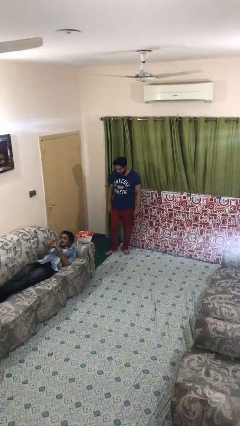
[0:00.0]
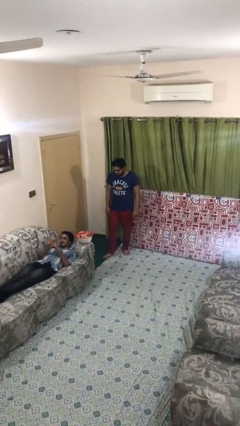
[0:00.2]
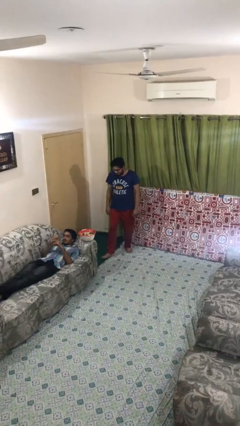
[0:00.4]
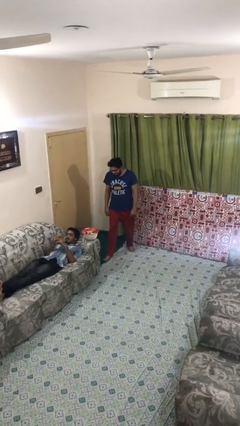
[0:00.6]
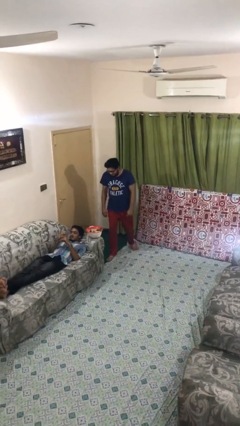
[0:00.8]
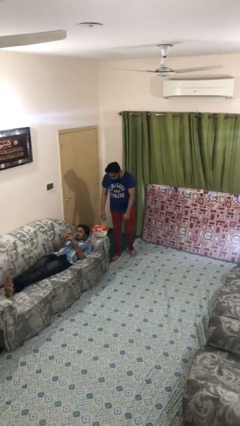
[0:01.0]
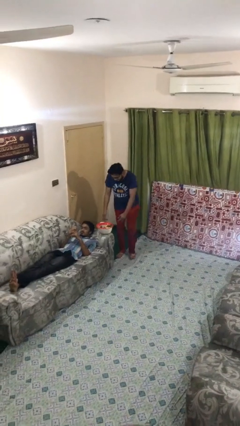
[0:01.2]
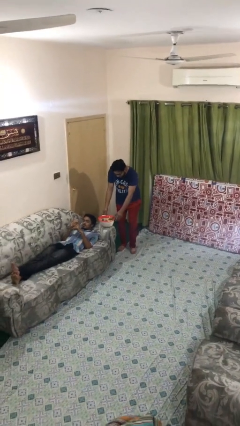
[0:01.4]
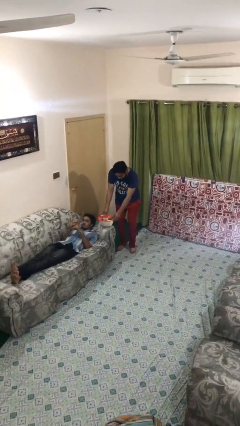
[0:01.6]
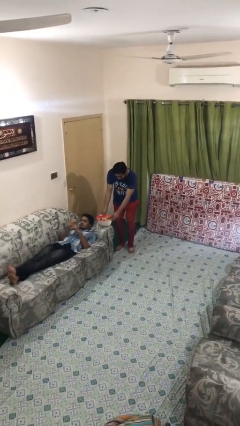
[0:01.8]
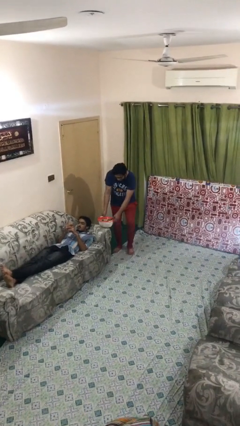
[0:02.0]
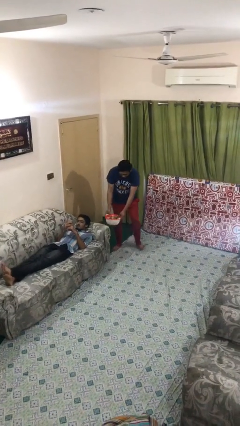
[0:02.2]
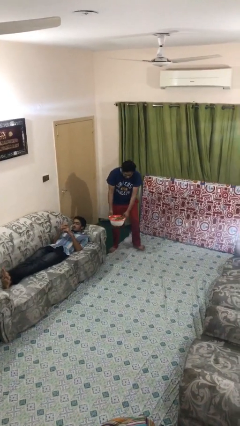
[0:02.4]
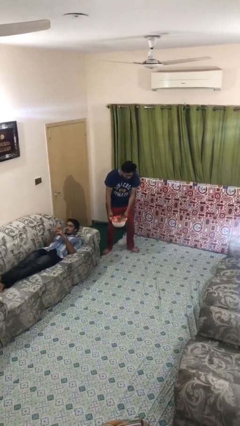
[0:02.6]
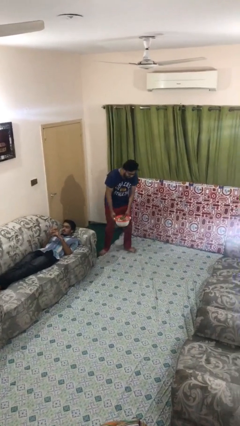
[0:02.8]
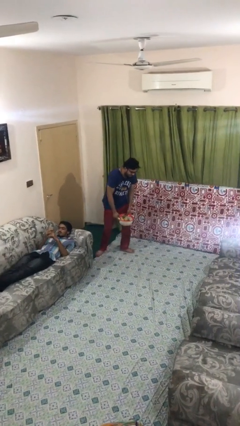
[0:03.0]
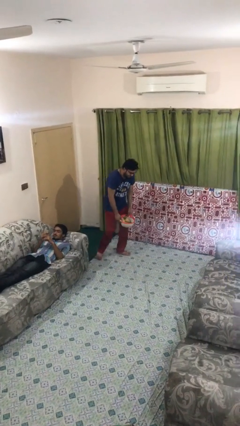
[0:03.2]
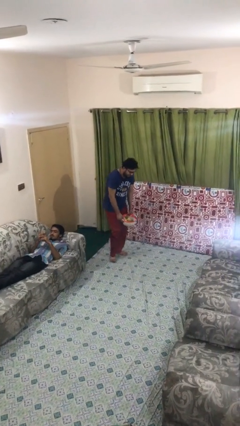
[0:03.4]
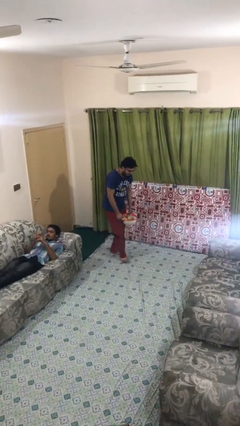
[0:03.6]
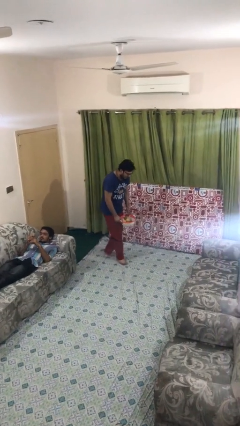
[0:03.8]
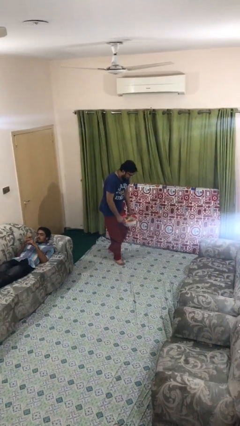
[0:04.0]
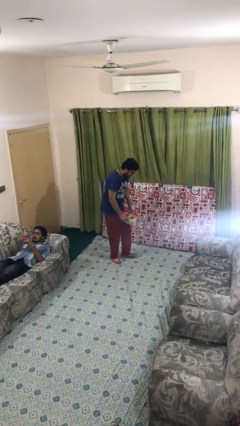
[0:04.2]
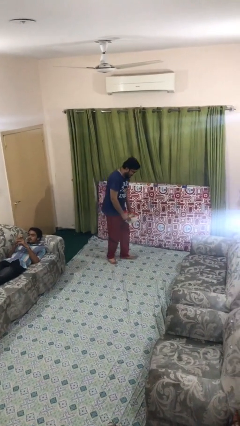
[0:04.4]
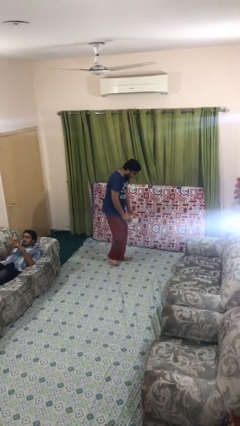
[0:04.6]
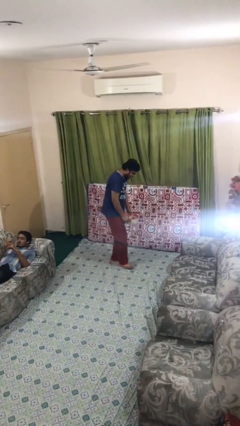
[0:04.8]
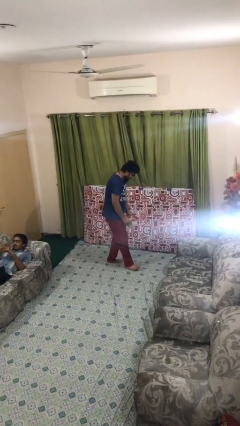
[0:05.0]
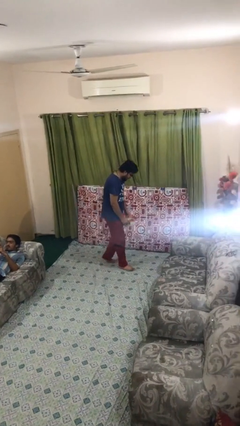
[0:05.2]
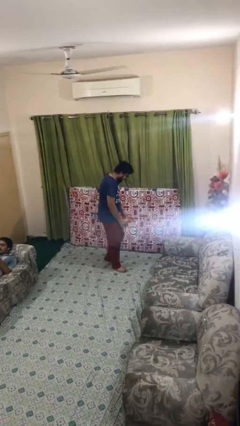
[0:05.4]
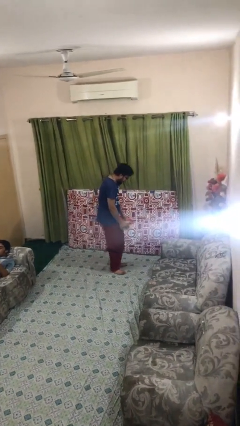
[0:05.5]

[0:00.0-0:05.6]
person steals object from person

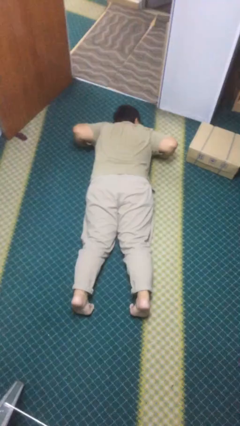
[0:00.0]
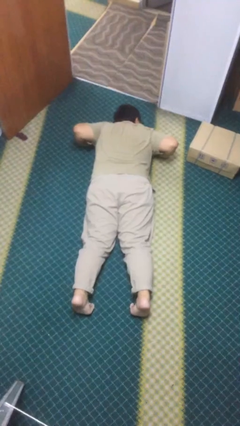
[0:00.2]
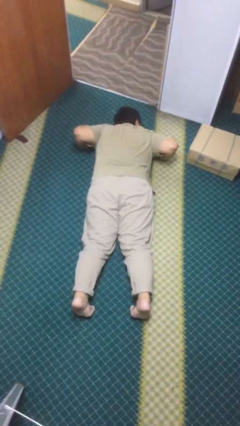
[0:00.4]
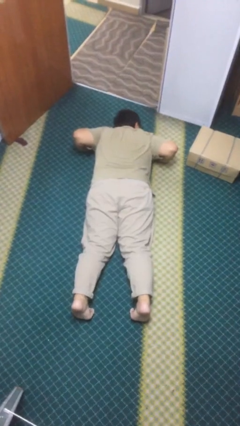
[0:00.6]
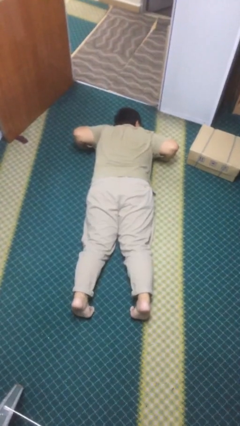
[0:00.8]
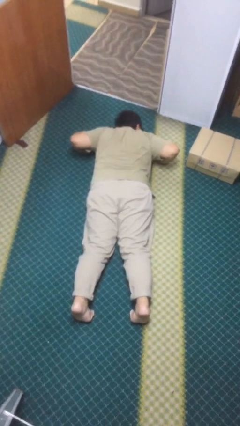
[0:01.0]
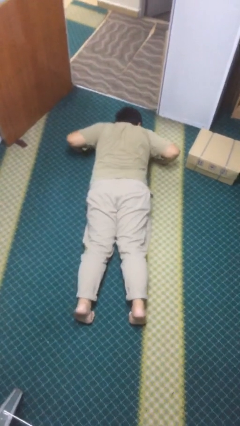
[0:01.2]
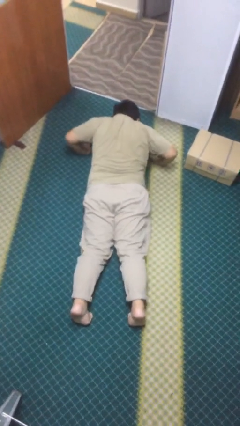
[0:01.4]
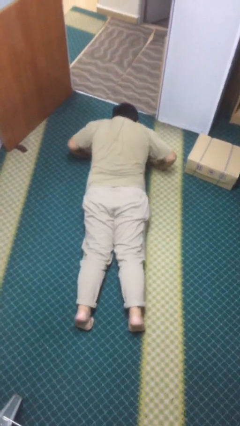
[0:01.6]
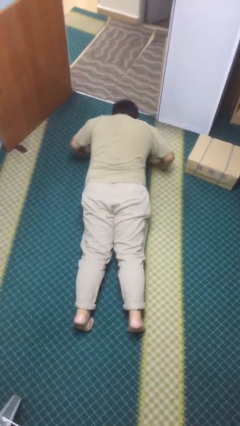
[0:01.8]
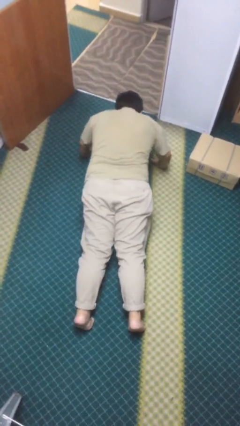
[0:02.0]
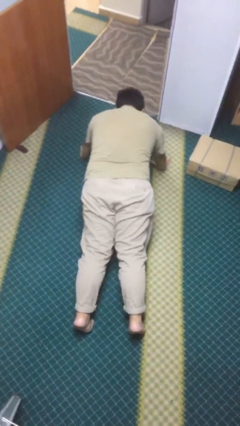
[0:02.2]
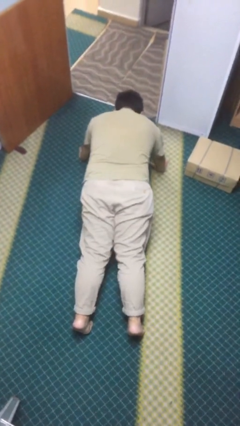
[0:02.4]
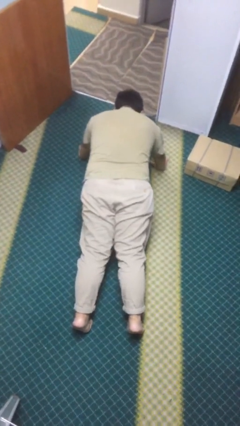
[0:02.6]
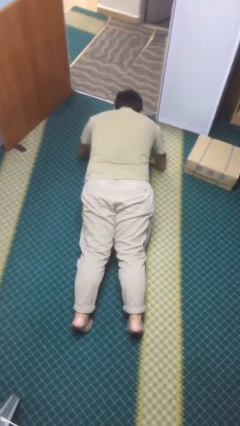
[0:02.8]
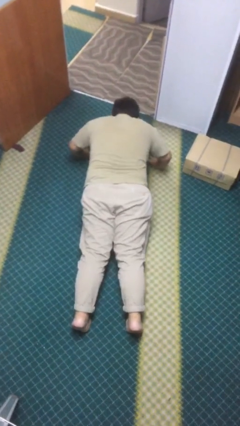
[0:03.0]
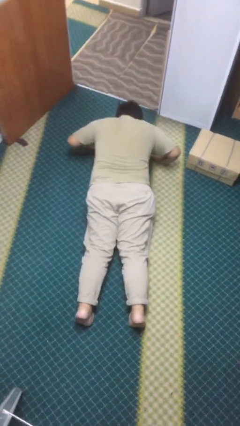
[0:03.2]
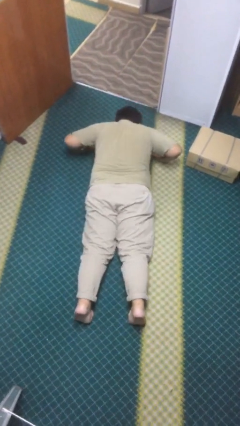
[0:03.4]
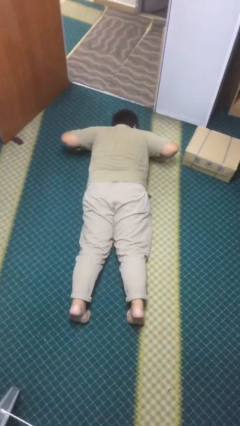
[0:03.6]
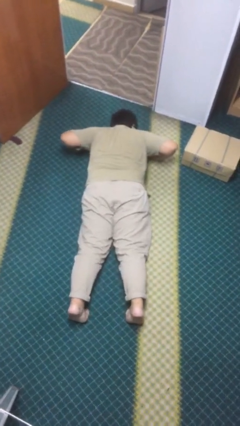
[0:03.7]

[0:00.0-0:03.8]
person exercises with pushup

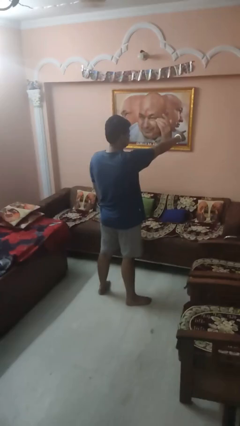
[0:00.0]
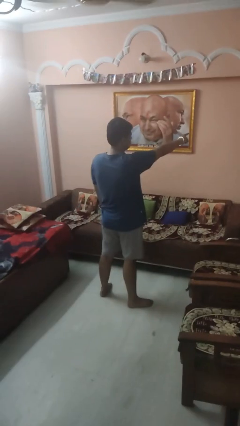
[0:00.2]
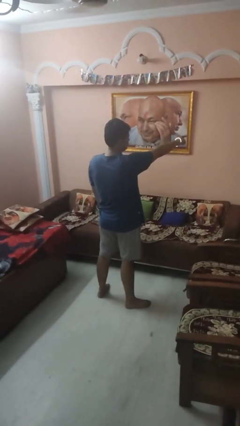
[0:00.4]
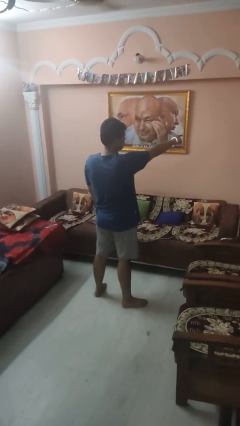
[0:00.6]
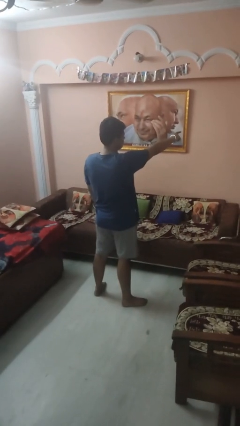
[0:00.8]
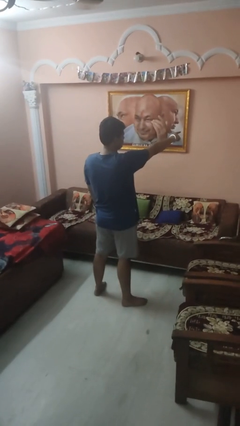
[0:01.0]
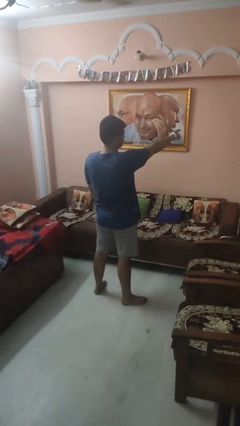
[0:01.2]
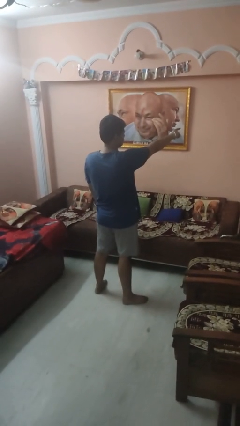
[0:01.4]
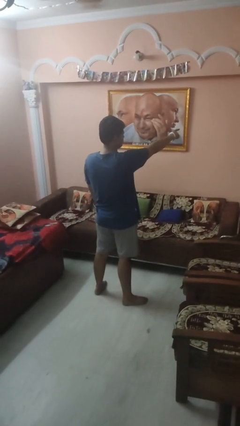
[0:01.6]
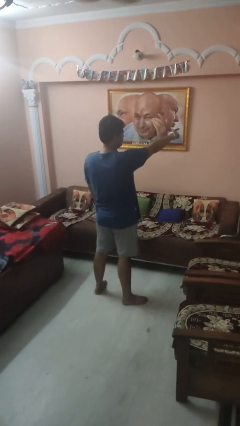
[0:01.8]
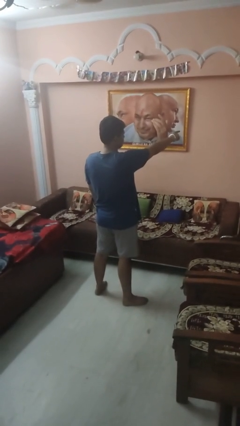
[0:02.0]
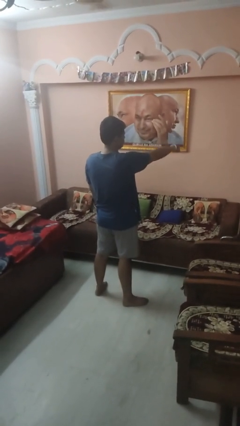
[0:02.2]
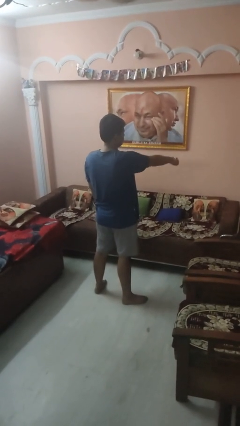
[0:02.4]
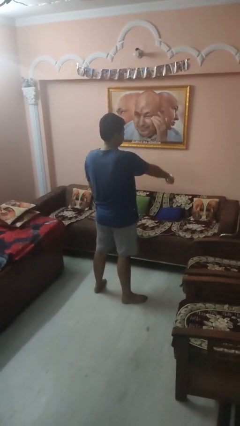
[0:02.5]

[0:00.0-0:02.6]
person points at person

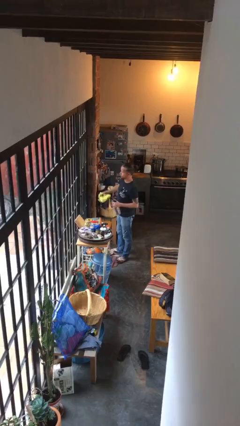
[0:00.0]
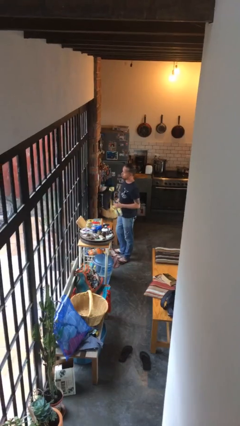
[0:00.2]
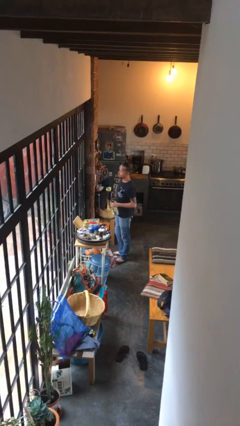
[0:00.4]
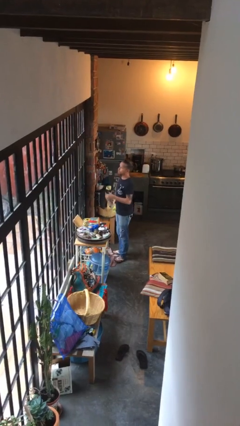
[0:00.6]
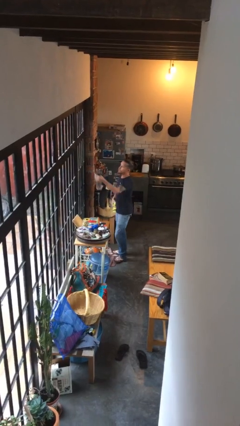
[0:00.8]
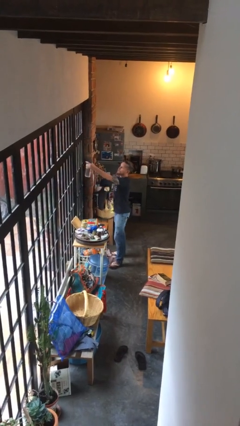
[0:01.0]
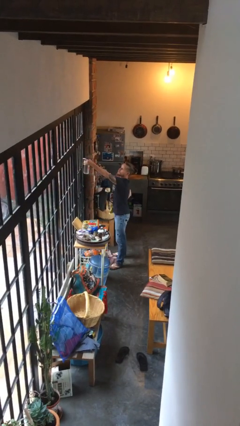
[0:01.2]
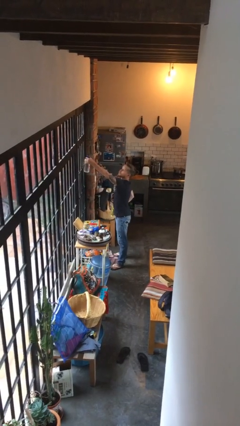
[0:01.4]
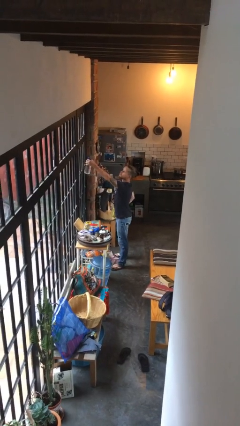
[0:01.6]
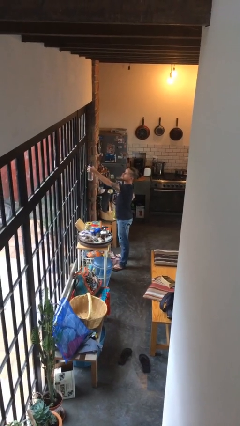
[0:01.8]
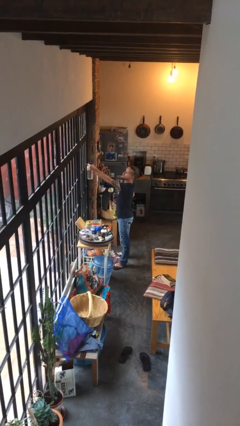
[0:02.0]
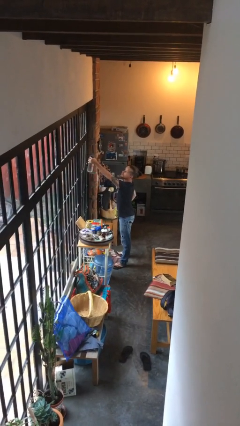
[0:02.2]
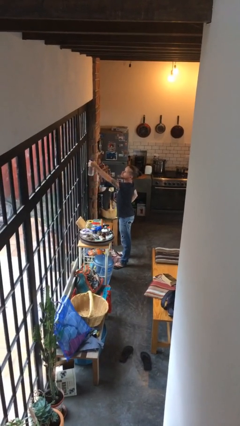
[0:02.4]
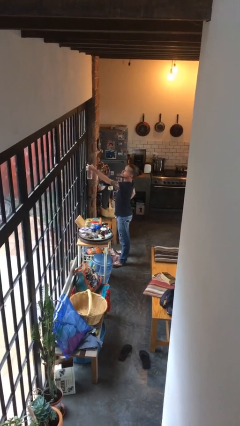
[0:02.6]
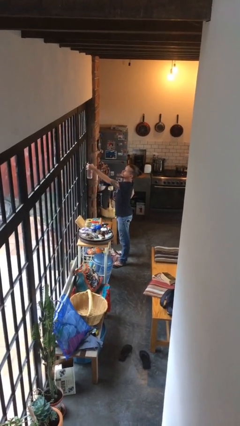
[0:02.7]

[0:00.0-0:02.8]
person sprays from bottle

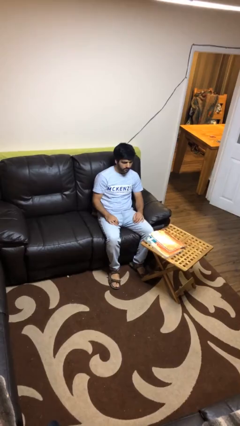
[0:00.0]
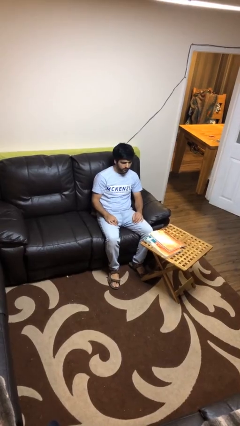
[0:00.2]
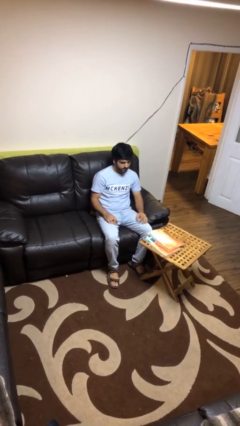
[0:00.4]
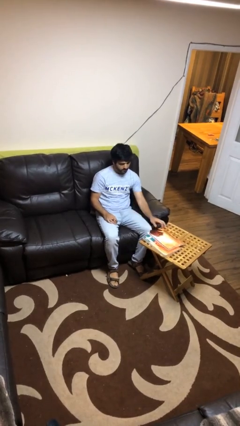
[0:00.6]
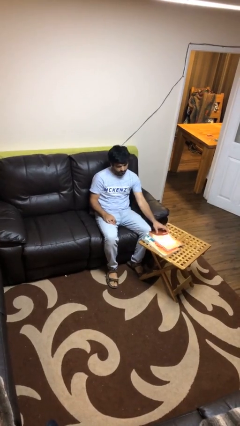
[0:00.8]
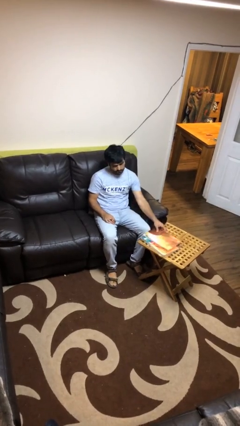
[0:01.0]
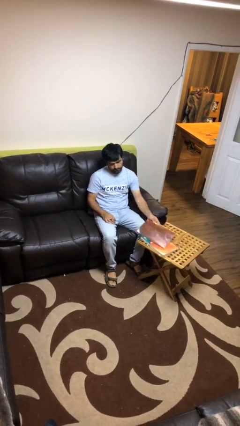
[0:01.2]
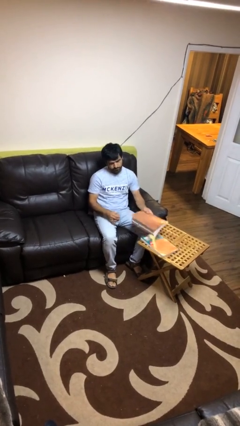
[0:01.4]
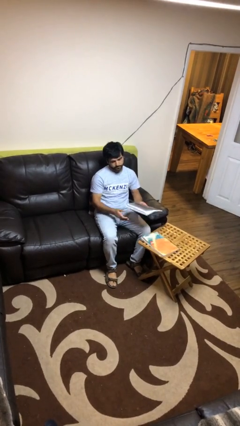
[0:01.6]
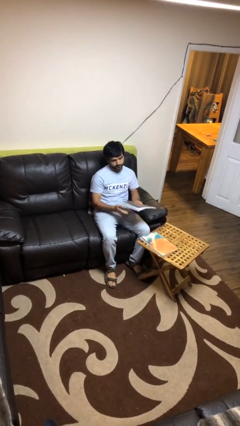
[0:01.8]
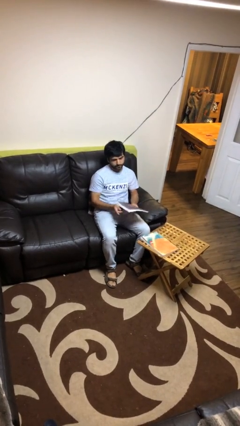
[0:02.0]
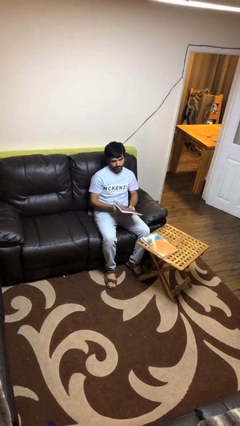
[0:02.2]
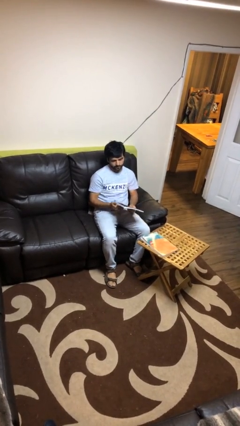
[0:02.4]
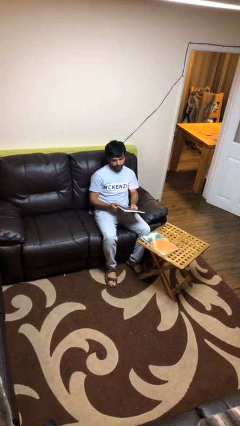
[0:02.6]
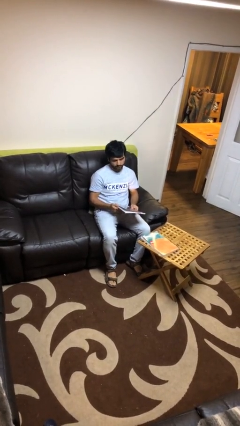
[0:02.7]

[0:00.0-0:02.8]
person picks up object from table
